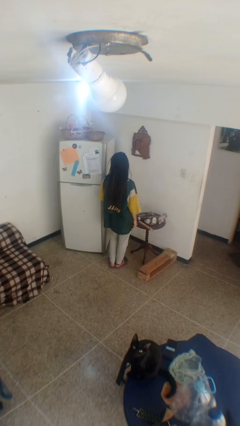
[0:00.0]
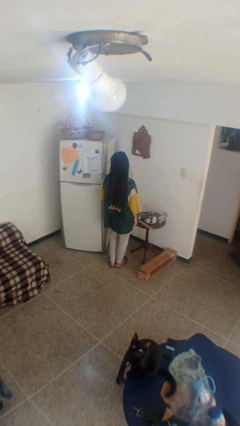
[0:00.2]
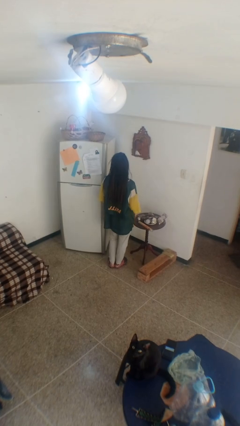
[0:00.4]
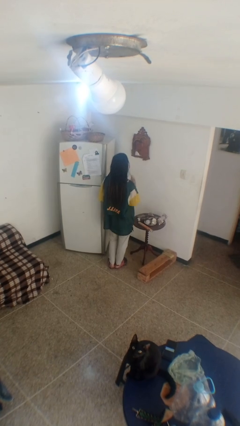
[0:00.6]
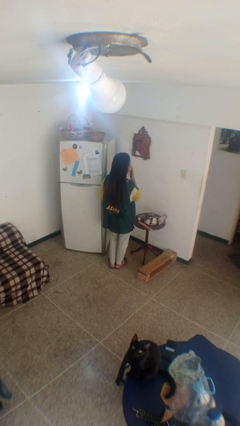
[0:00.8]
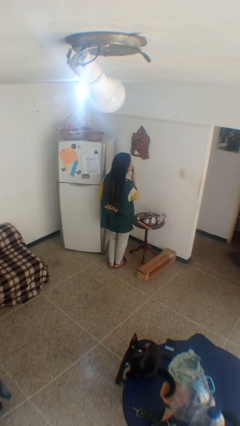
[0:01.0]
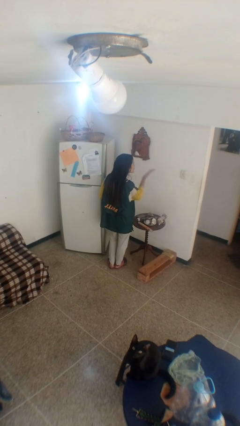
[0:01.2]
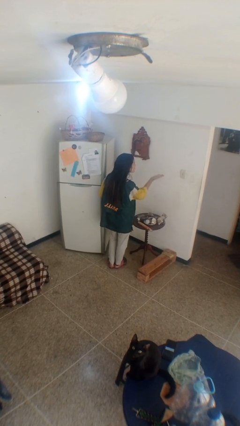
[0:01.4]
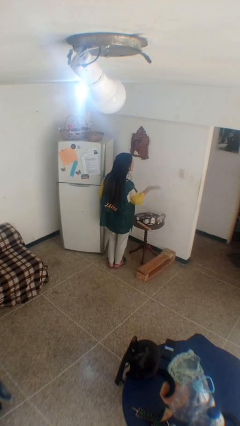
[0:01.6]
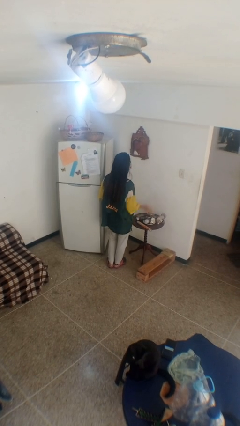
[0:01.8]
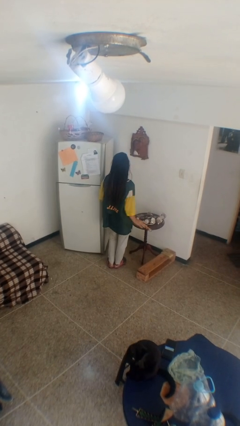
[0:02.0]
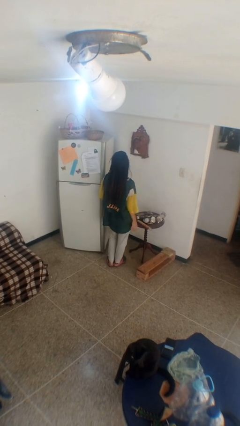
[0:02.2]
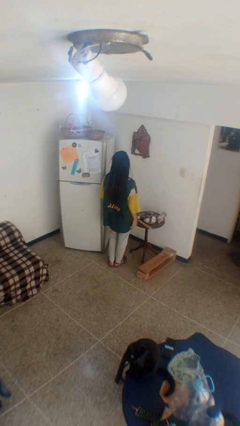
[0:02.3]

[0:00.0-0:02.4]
person gestures blow kiss

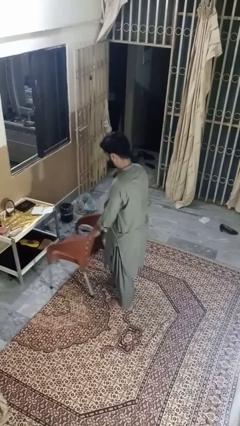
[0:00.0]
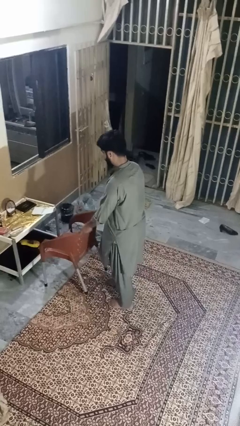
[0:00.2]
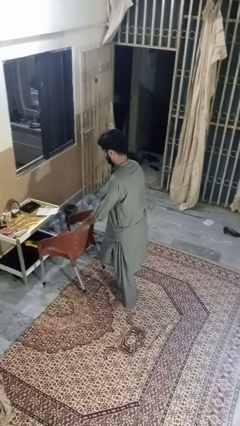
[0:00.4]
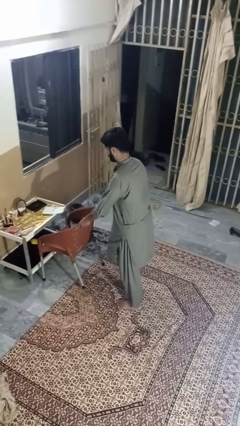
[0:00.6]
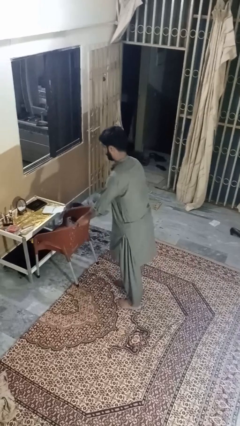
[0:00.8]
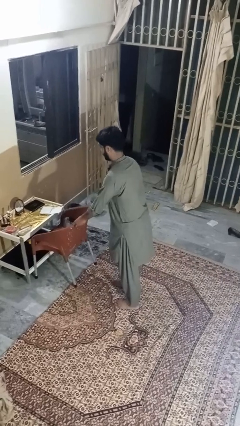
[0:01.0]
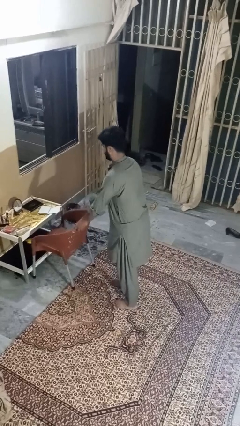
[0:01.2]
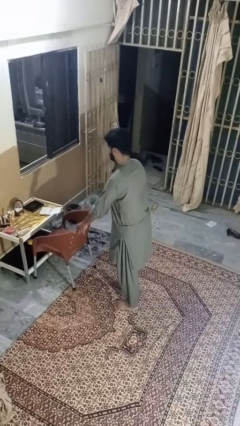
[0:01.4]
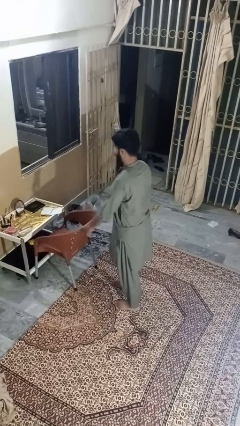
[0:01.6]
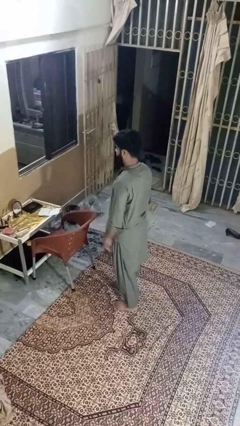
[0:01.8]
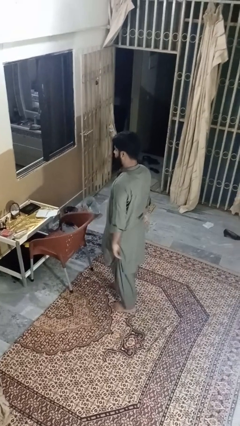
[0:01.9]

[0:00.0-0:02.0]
person pushes in chair

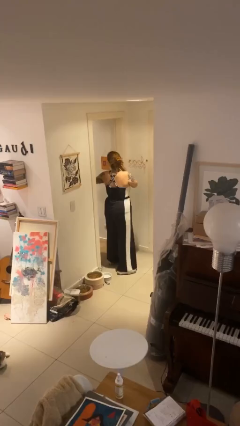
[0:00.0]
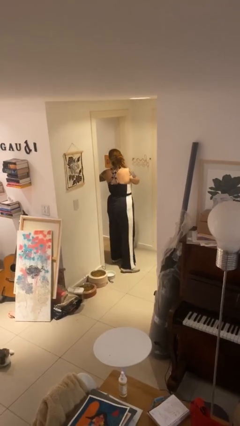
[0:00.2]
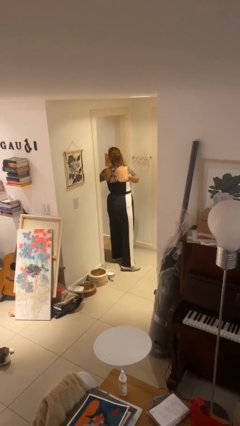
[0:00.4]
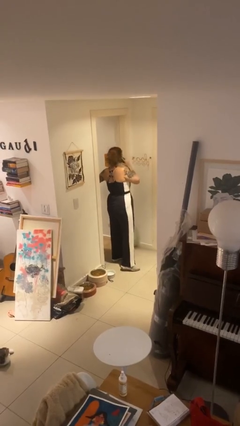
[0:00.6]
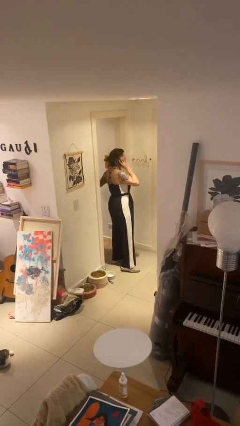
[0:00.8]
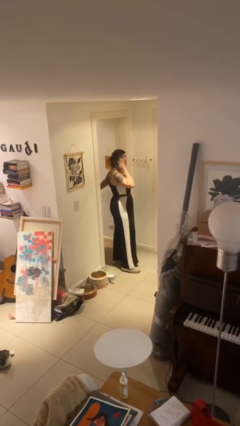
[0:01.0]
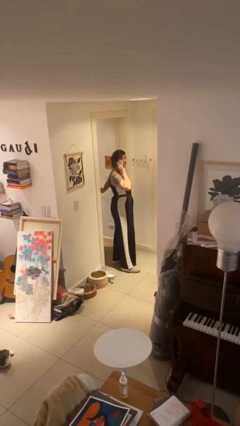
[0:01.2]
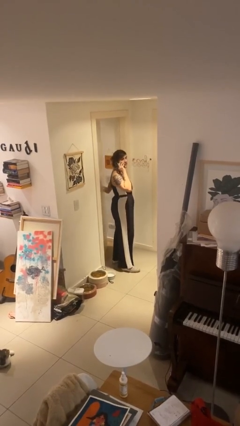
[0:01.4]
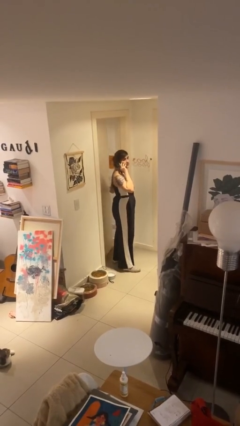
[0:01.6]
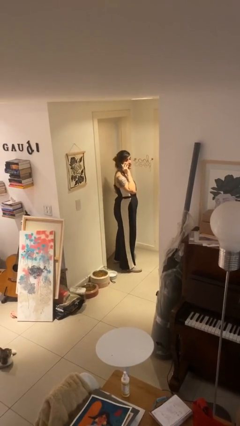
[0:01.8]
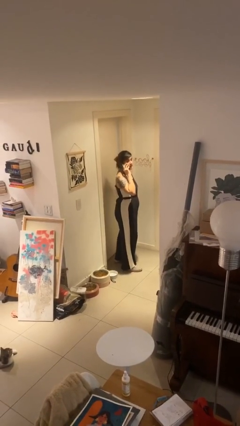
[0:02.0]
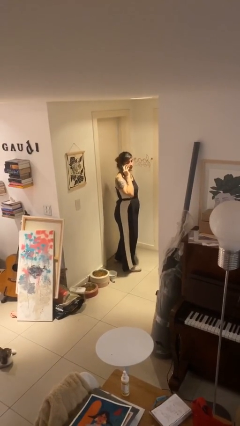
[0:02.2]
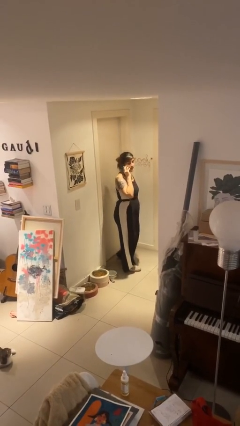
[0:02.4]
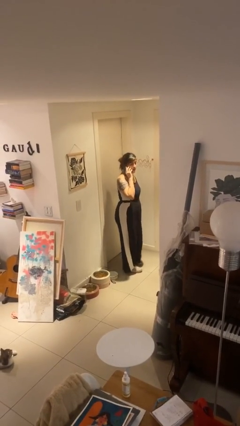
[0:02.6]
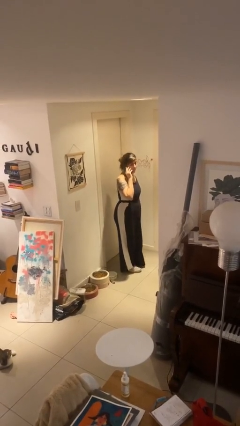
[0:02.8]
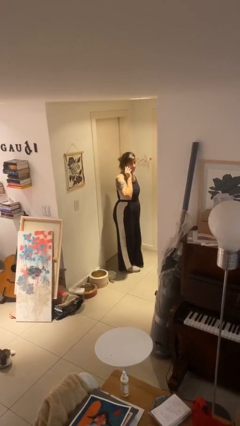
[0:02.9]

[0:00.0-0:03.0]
person closes facility door

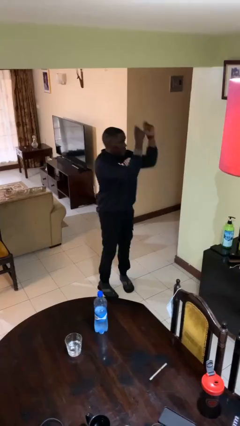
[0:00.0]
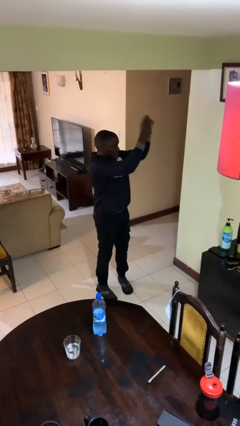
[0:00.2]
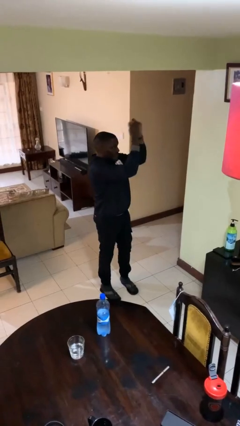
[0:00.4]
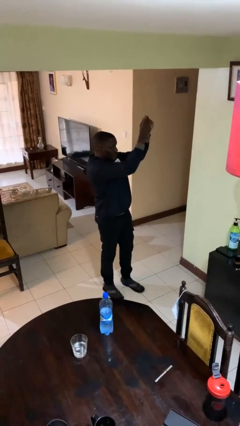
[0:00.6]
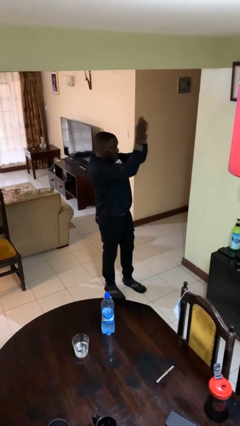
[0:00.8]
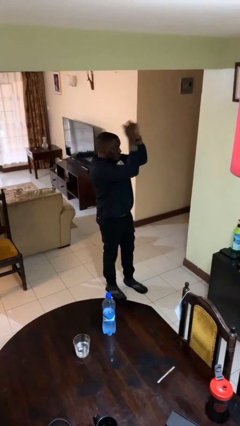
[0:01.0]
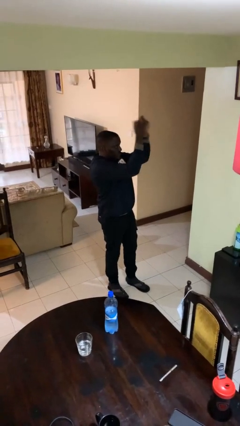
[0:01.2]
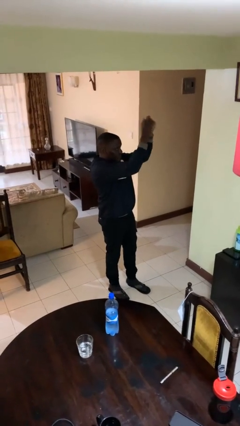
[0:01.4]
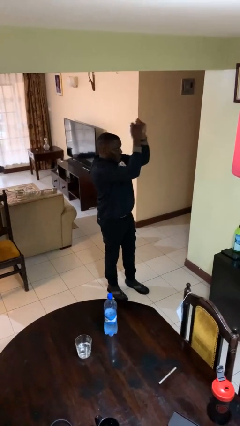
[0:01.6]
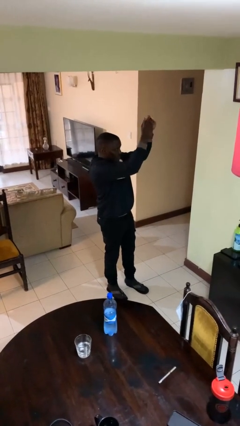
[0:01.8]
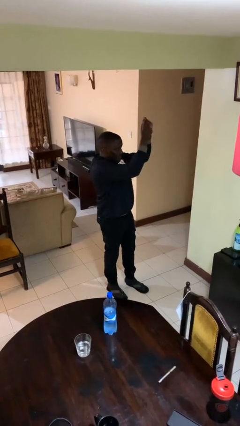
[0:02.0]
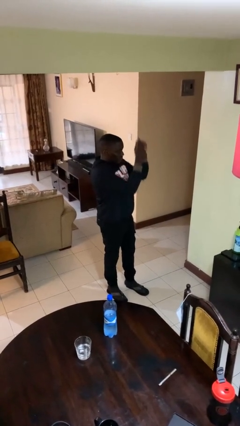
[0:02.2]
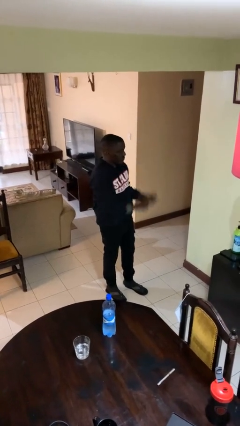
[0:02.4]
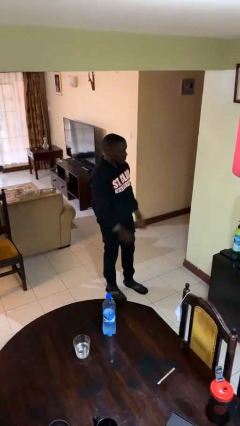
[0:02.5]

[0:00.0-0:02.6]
person snaps fingers

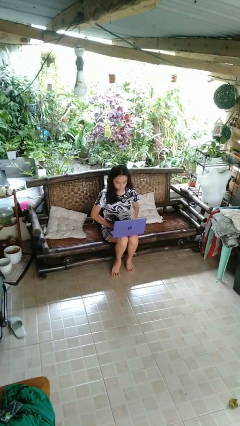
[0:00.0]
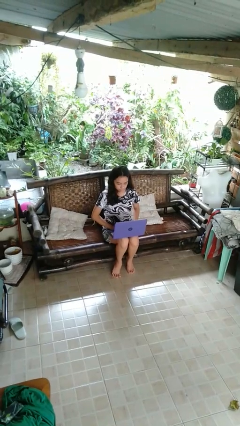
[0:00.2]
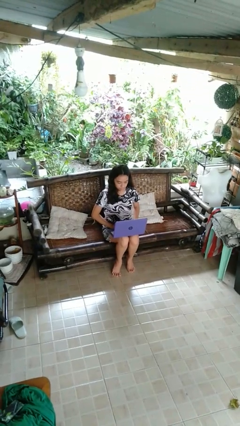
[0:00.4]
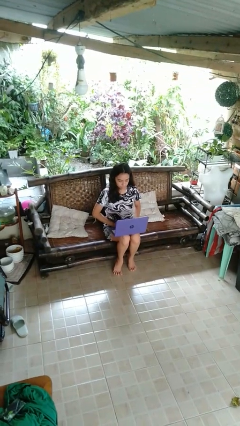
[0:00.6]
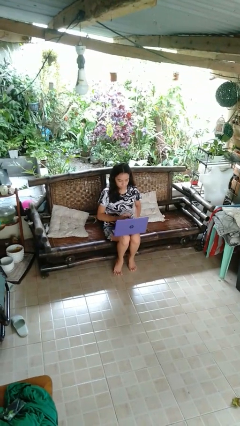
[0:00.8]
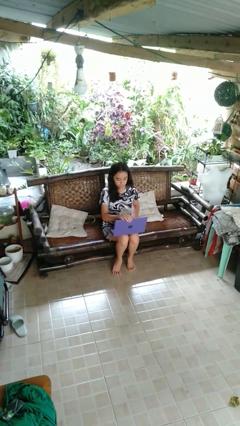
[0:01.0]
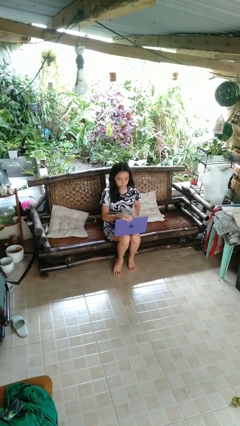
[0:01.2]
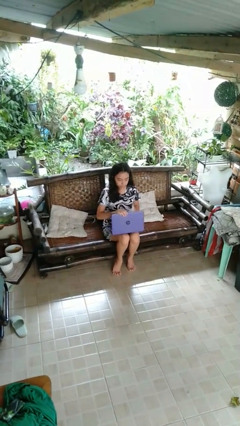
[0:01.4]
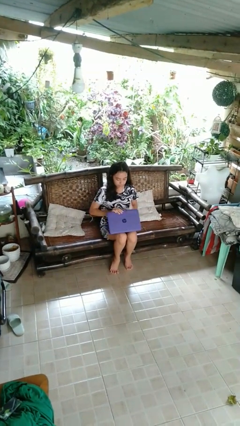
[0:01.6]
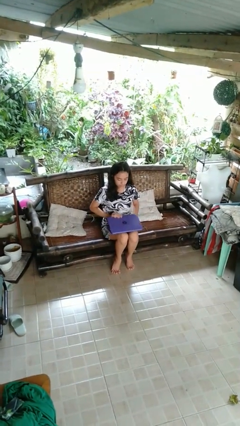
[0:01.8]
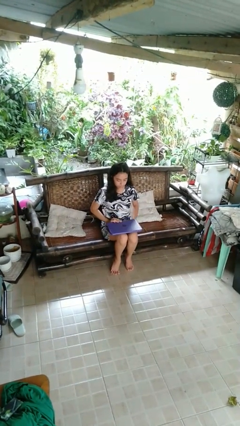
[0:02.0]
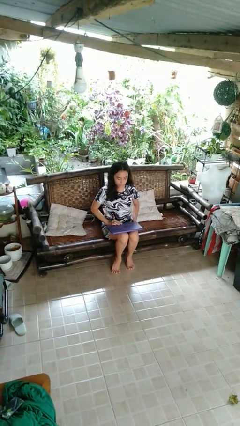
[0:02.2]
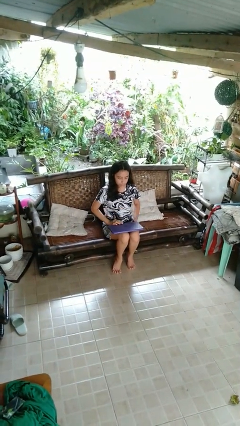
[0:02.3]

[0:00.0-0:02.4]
person closes laptop

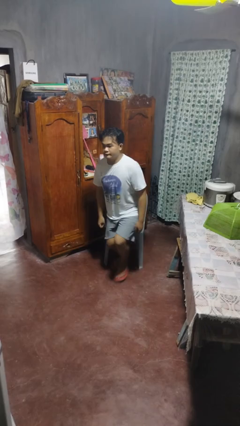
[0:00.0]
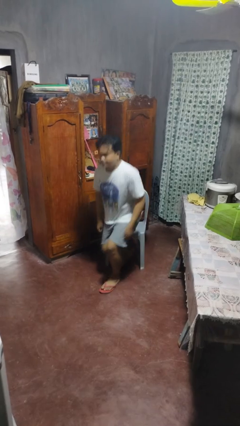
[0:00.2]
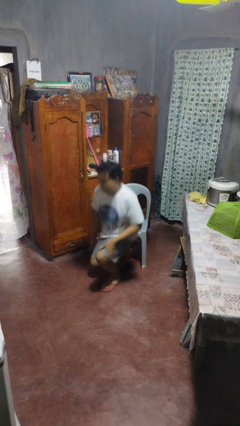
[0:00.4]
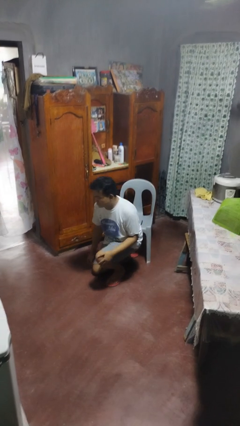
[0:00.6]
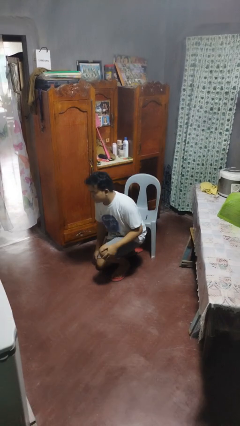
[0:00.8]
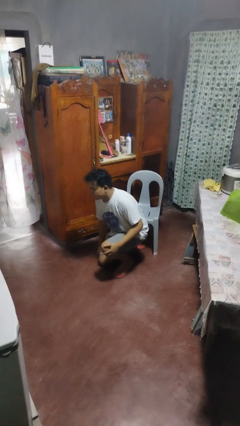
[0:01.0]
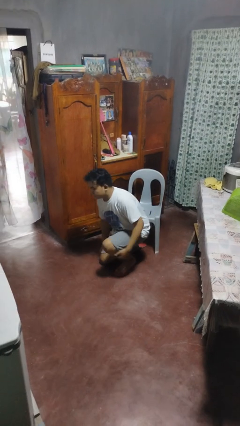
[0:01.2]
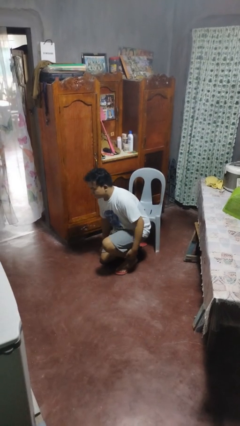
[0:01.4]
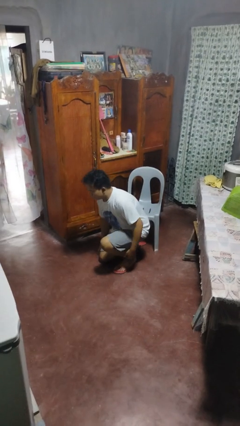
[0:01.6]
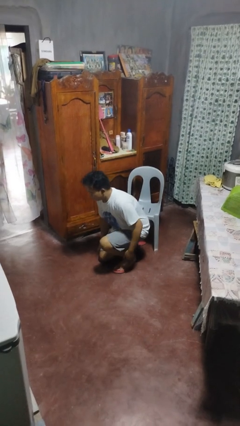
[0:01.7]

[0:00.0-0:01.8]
person falls from chair

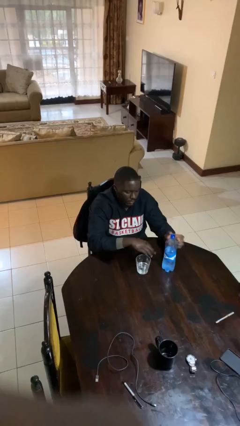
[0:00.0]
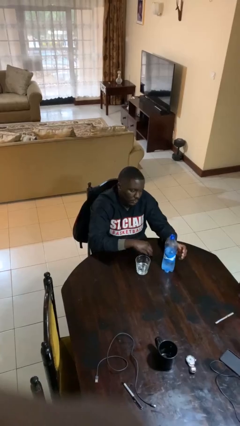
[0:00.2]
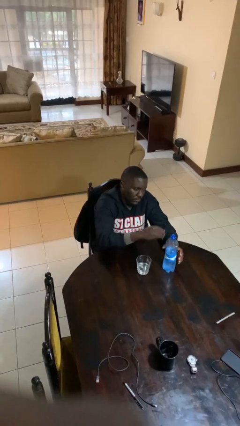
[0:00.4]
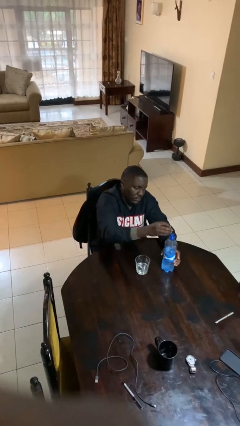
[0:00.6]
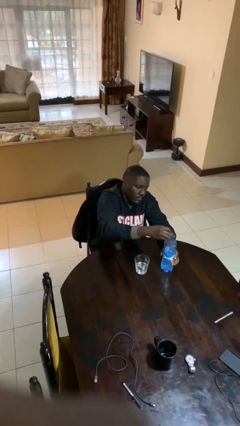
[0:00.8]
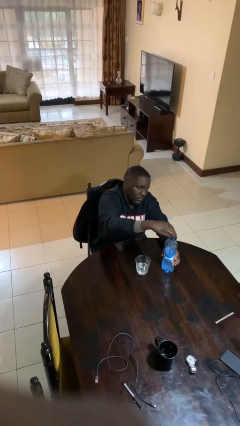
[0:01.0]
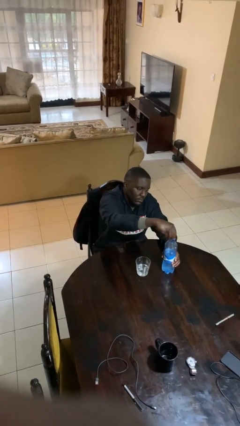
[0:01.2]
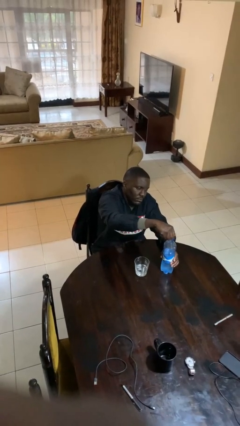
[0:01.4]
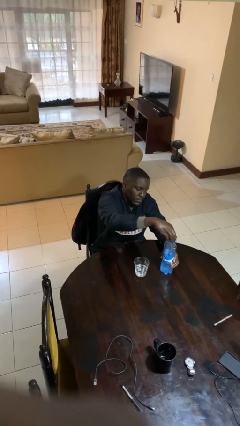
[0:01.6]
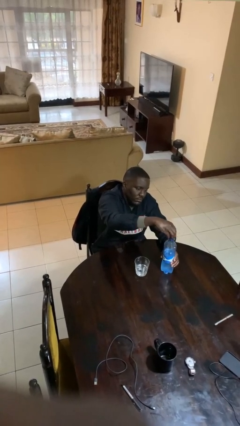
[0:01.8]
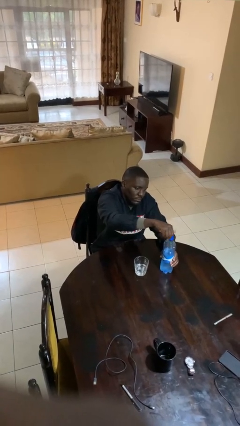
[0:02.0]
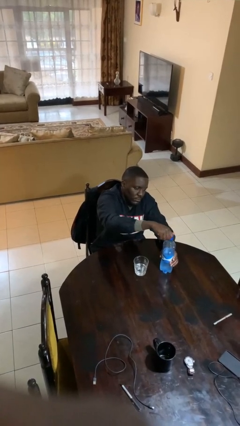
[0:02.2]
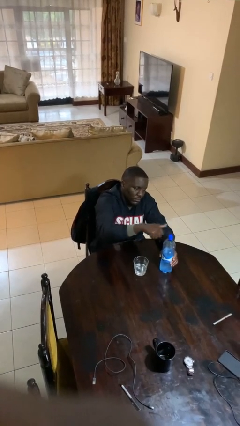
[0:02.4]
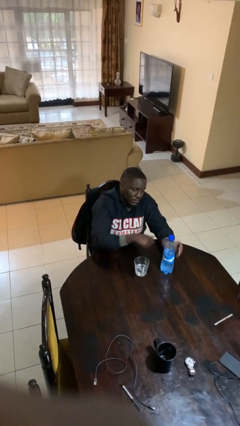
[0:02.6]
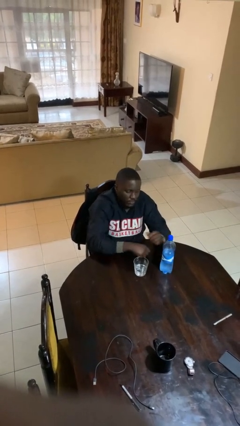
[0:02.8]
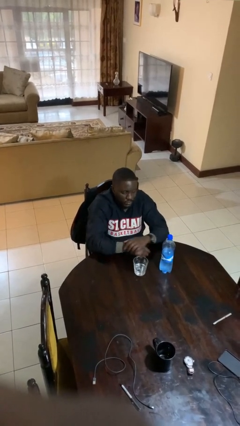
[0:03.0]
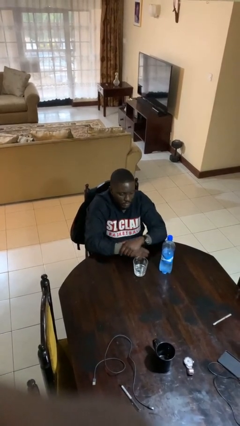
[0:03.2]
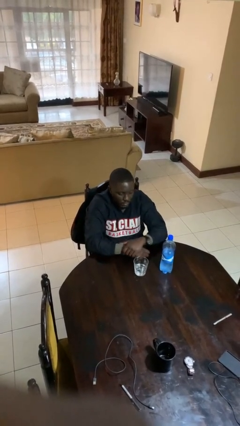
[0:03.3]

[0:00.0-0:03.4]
person screws lid to bottle
